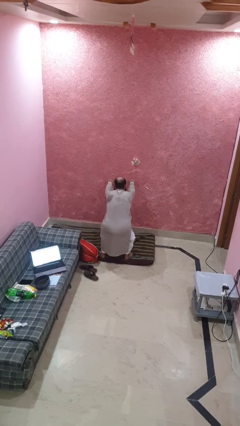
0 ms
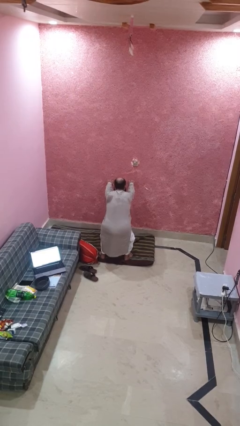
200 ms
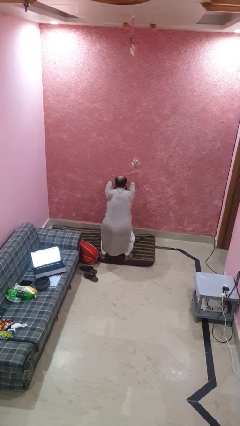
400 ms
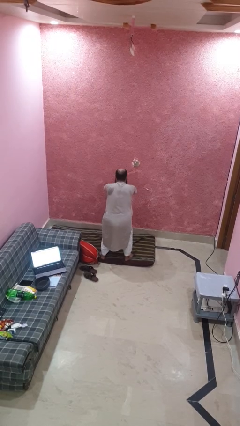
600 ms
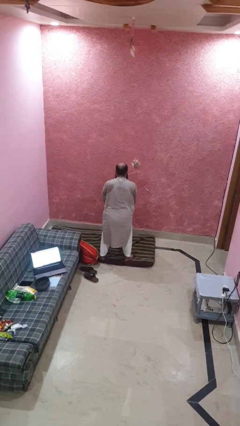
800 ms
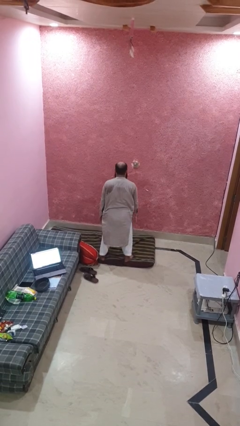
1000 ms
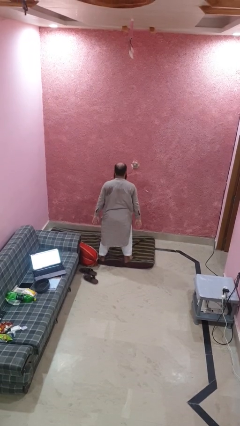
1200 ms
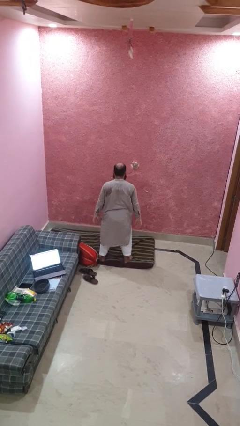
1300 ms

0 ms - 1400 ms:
person stands up

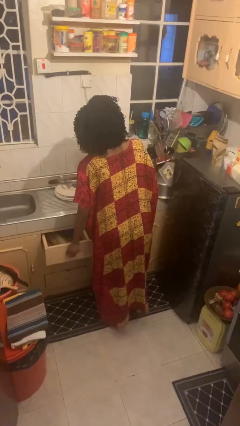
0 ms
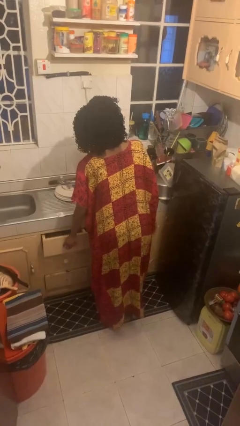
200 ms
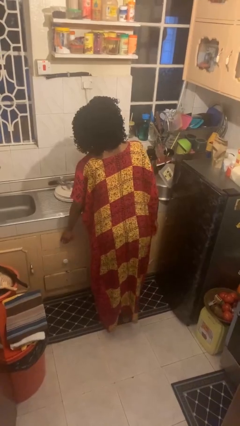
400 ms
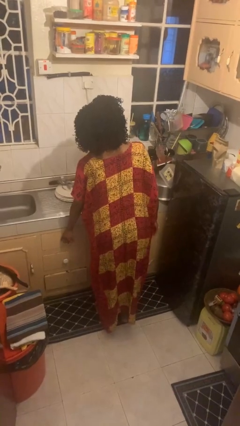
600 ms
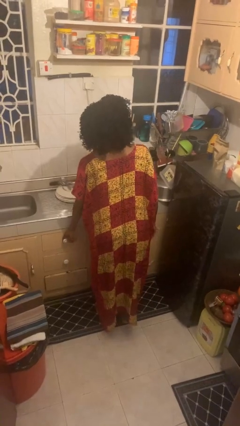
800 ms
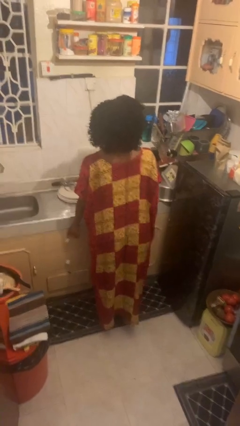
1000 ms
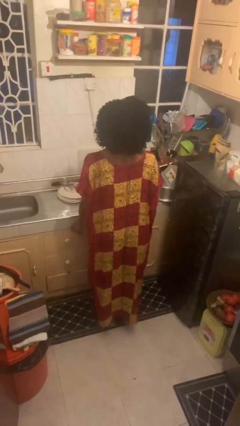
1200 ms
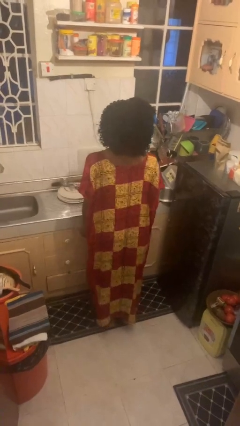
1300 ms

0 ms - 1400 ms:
person closes kitchen drawer

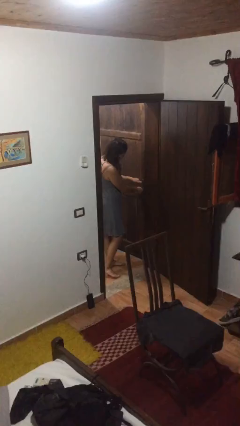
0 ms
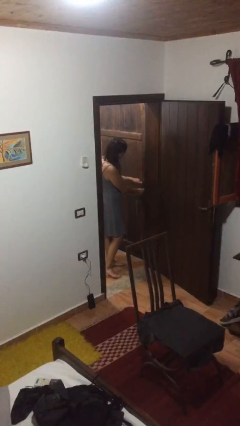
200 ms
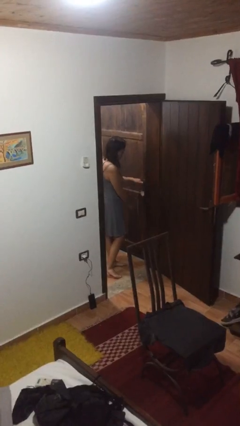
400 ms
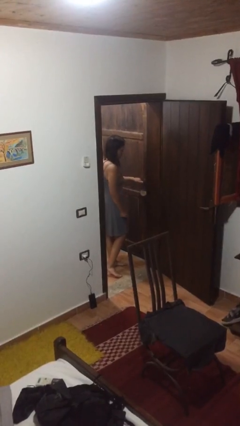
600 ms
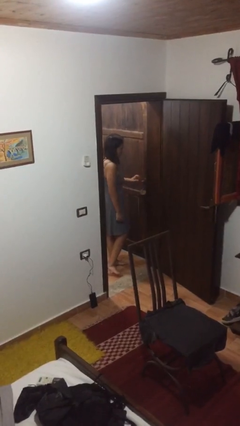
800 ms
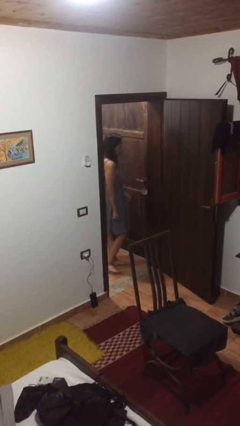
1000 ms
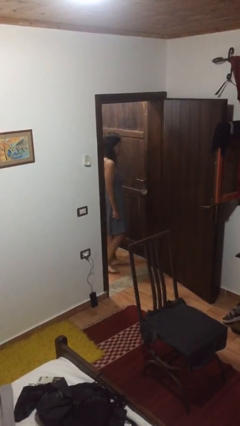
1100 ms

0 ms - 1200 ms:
person locks door with keys

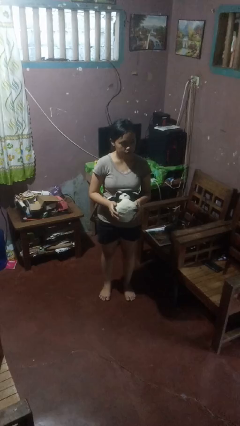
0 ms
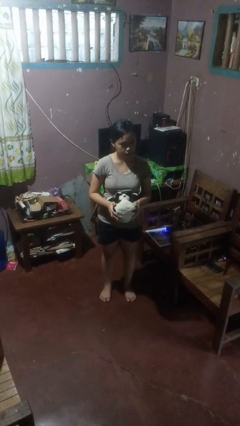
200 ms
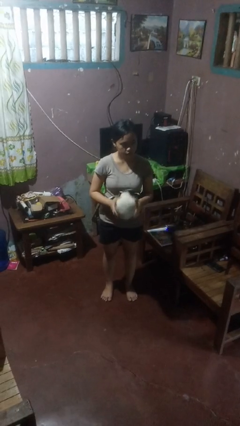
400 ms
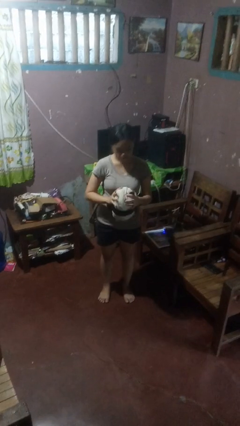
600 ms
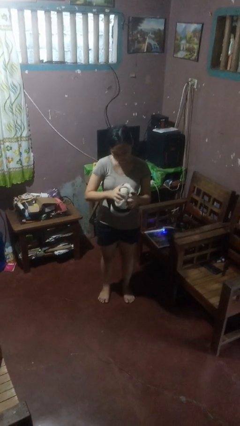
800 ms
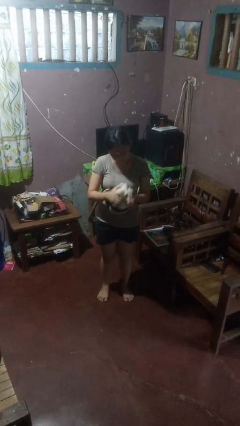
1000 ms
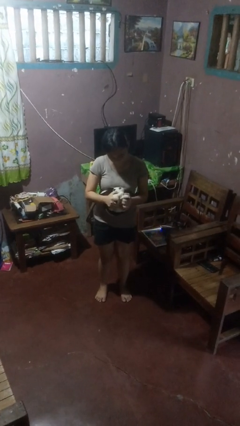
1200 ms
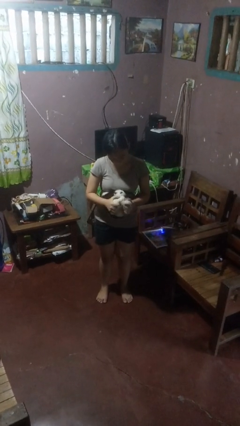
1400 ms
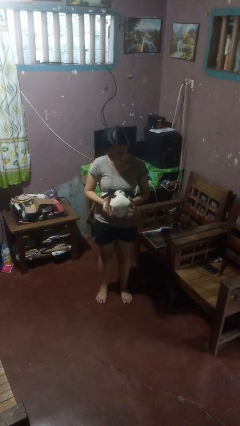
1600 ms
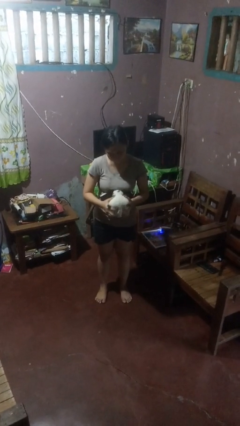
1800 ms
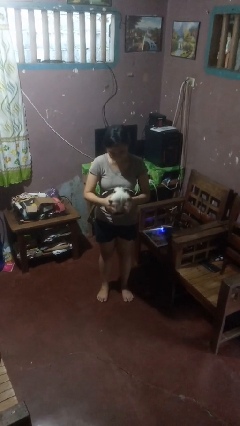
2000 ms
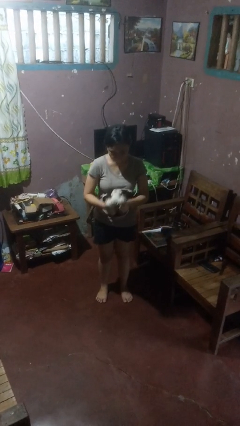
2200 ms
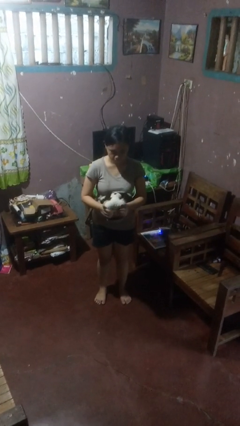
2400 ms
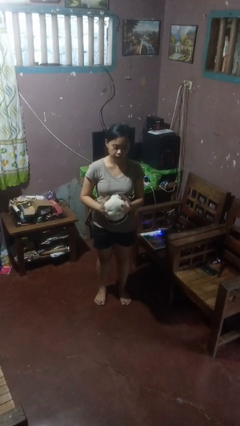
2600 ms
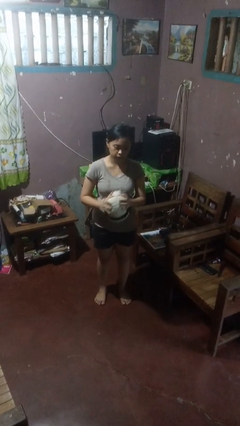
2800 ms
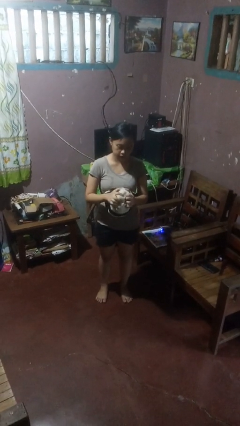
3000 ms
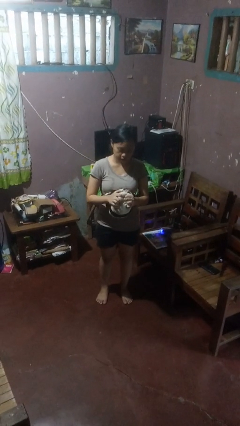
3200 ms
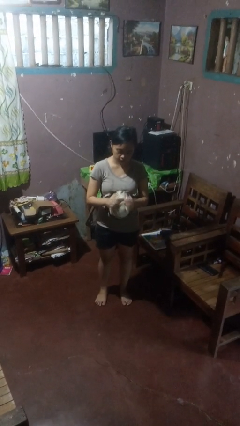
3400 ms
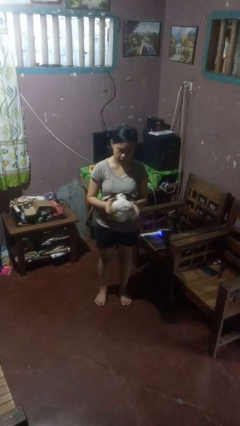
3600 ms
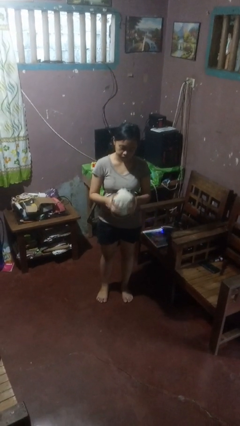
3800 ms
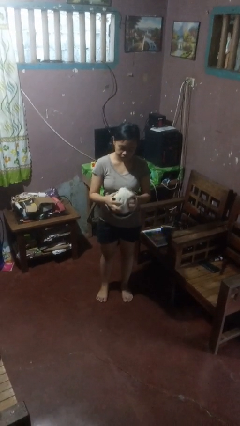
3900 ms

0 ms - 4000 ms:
person squeezes object

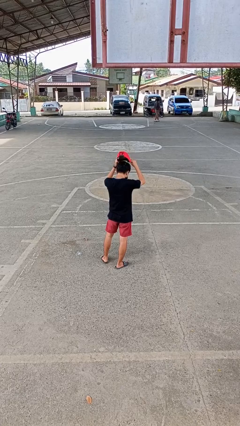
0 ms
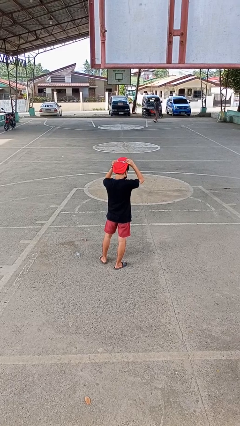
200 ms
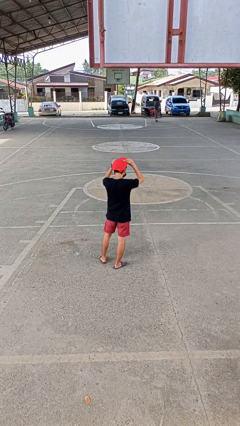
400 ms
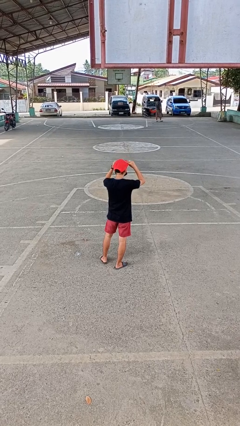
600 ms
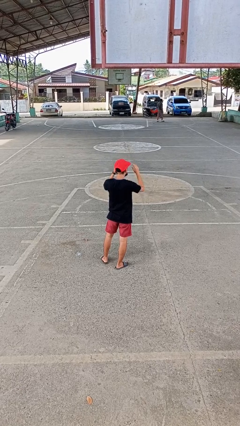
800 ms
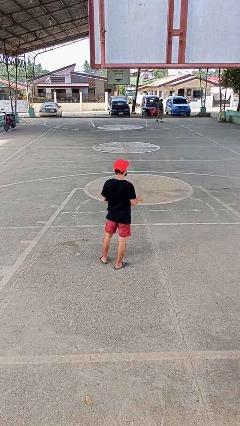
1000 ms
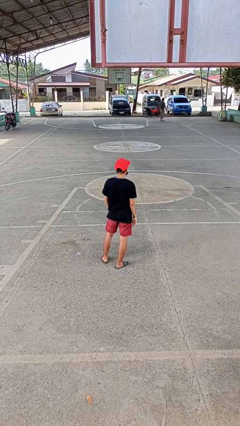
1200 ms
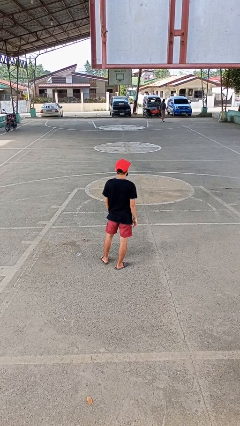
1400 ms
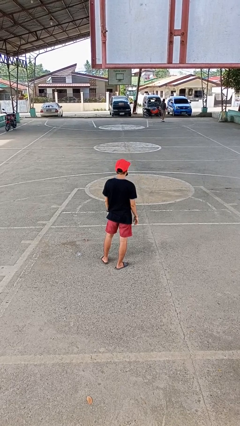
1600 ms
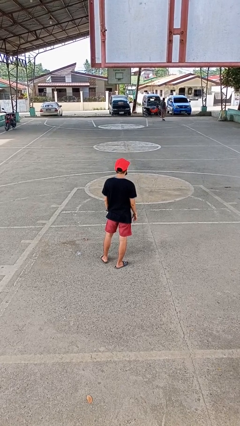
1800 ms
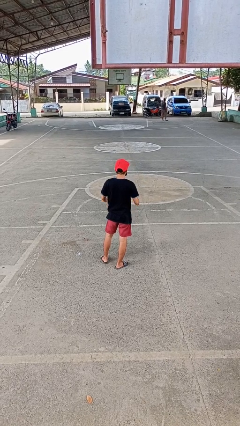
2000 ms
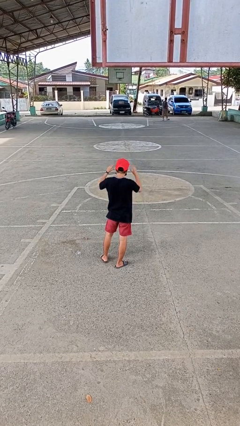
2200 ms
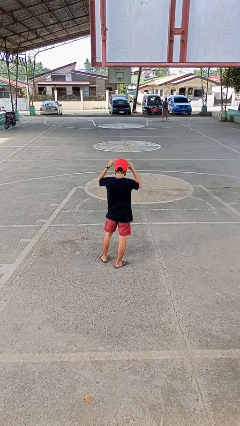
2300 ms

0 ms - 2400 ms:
person puts on hat

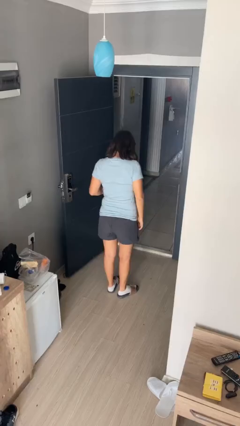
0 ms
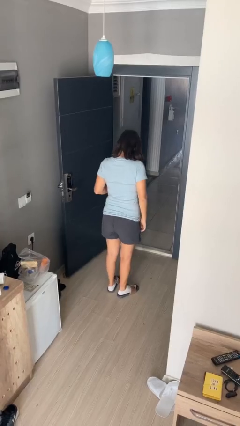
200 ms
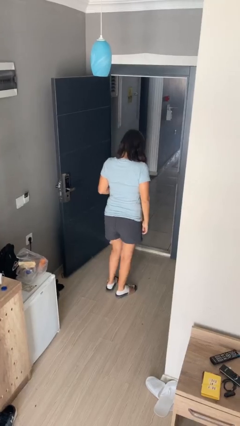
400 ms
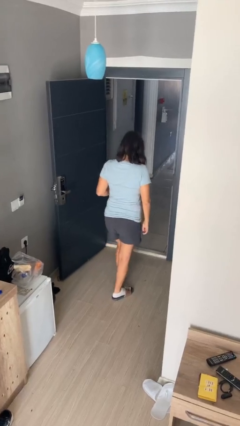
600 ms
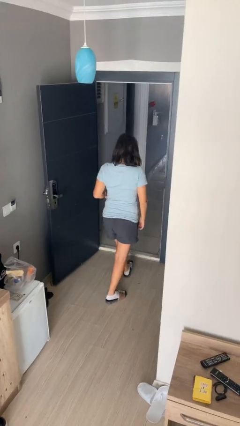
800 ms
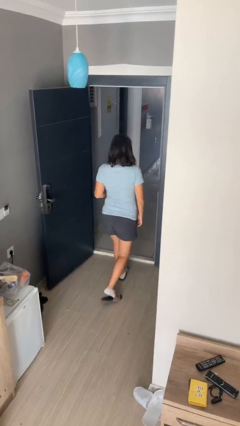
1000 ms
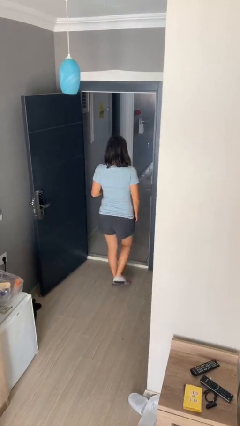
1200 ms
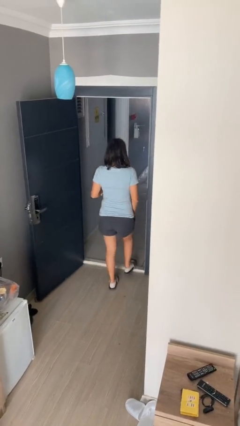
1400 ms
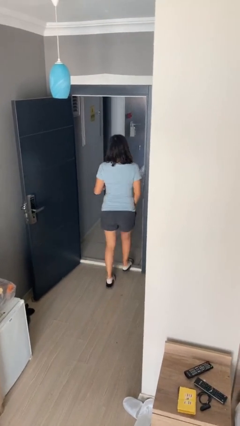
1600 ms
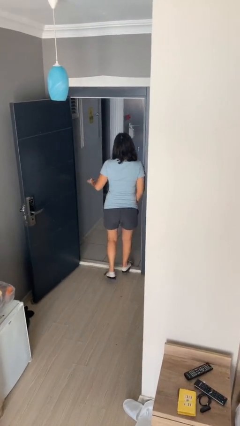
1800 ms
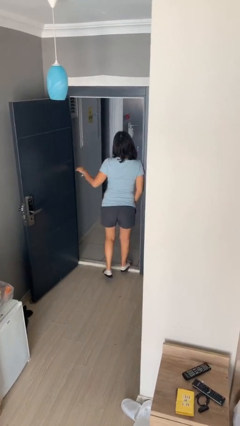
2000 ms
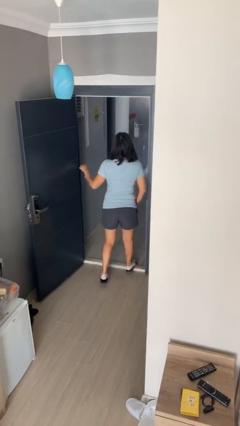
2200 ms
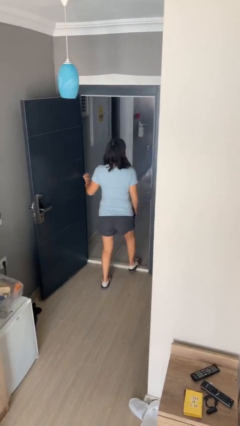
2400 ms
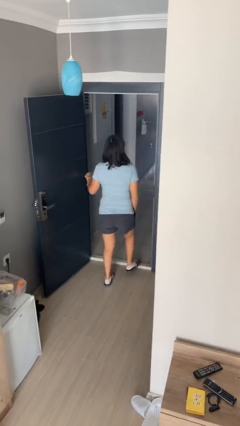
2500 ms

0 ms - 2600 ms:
person bumps into wall

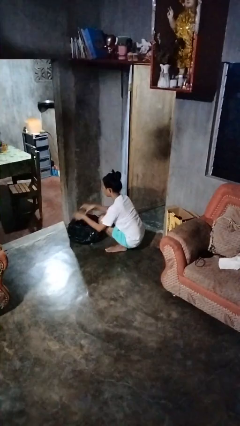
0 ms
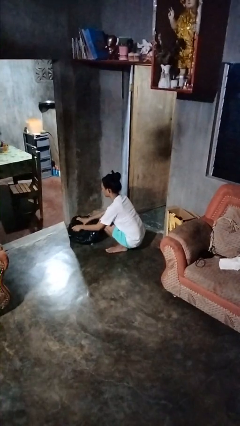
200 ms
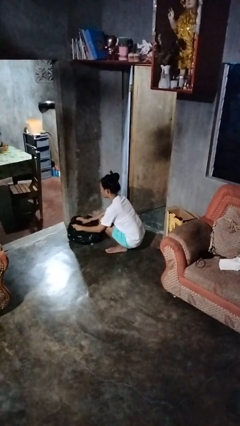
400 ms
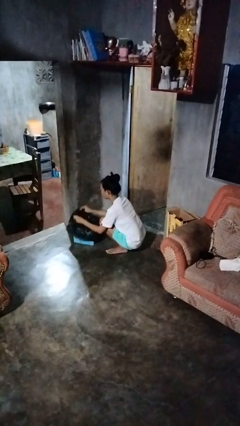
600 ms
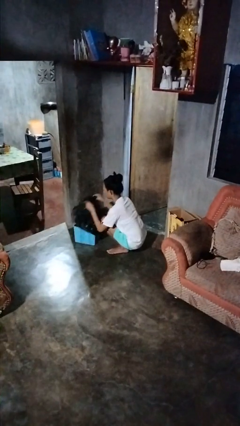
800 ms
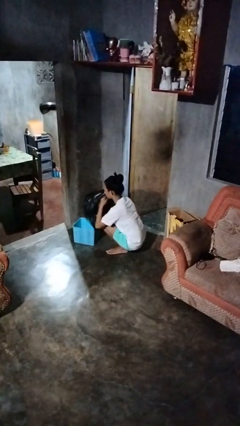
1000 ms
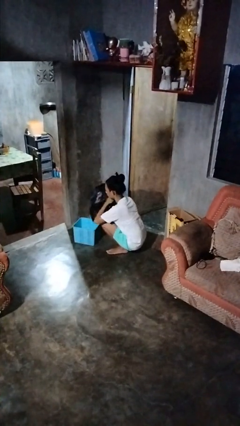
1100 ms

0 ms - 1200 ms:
person removes trashbag from trashcan

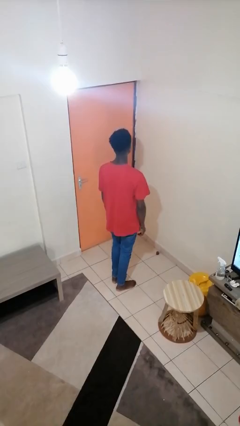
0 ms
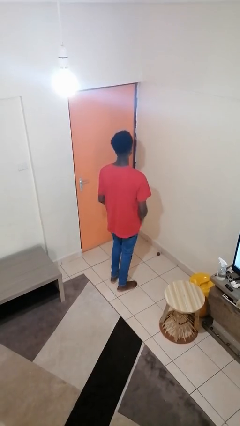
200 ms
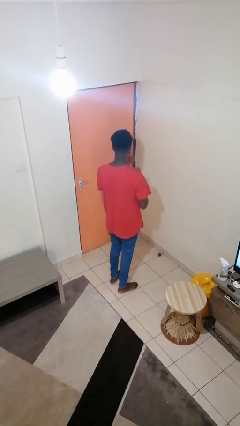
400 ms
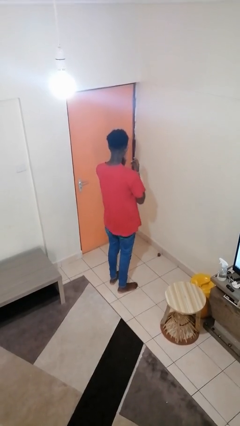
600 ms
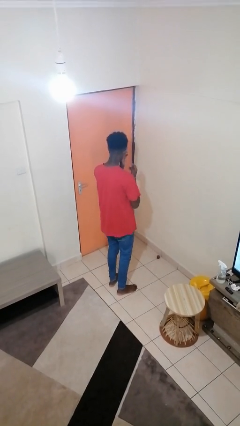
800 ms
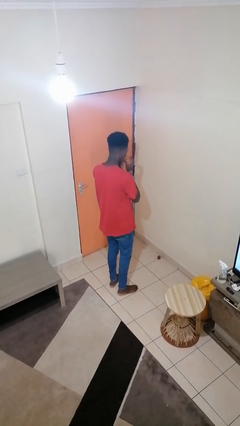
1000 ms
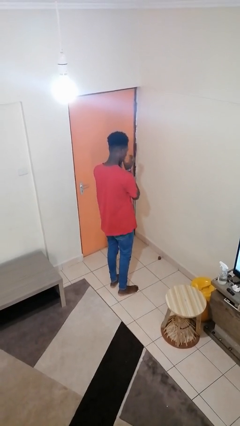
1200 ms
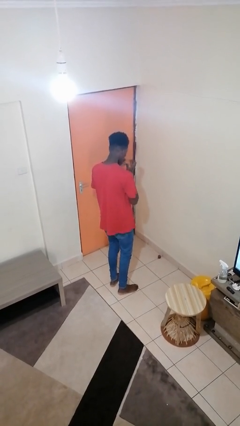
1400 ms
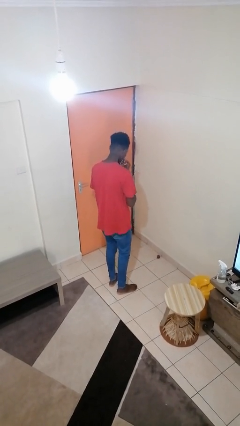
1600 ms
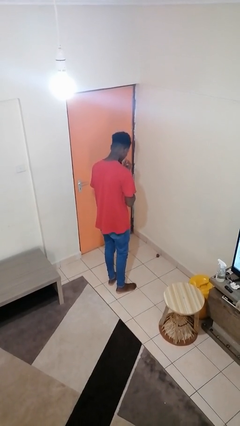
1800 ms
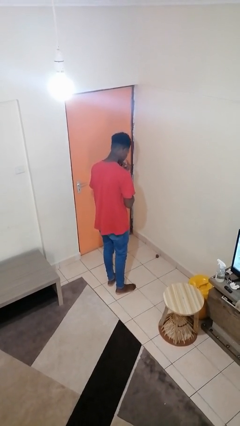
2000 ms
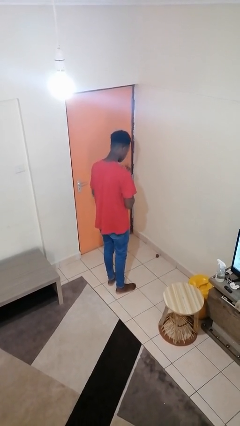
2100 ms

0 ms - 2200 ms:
person licks fingers

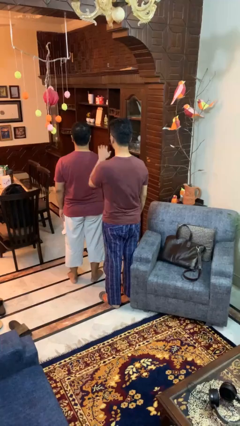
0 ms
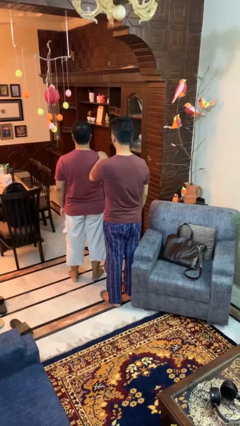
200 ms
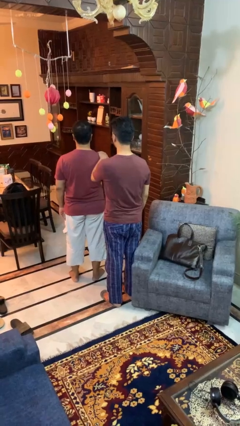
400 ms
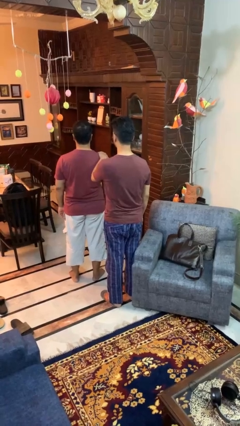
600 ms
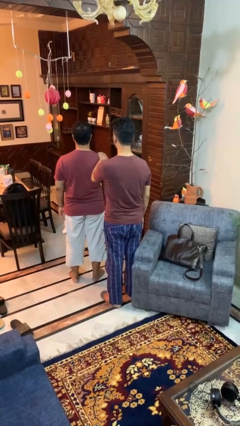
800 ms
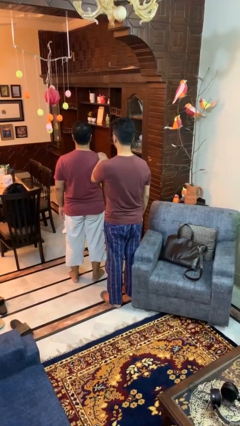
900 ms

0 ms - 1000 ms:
person grabs person by shoulder
